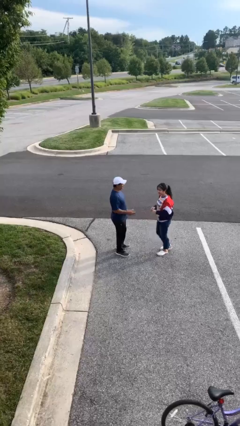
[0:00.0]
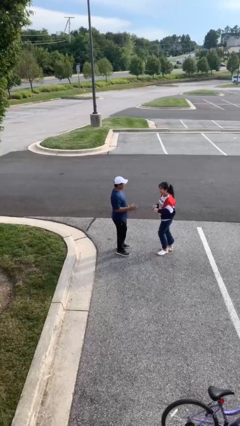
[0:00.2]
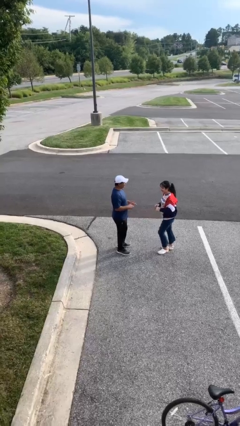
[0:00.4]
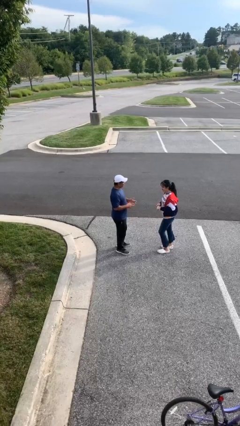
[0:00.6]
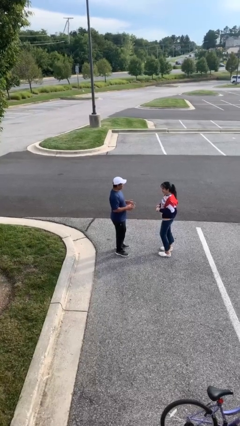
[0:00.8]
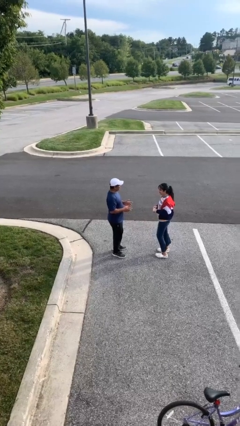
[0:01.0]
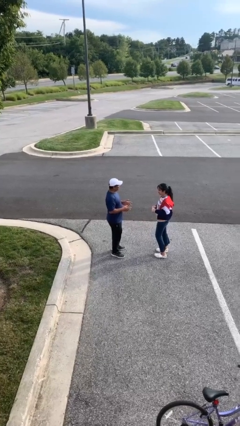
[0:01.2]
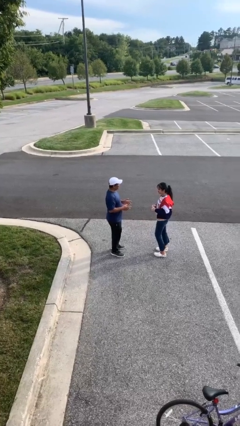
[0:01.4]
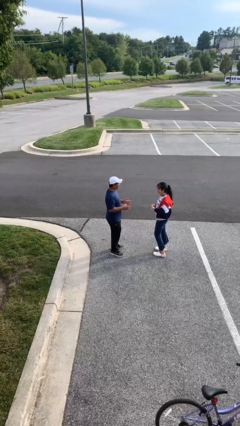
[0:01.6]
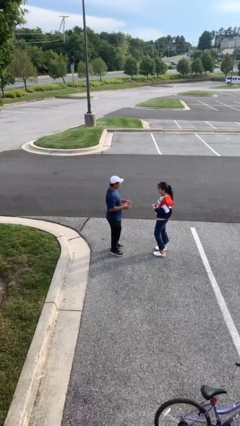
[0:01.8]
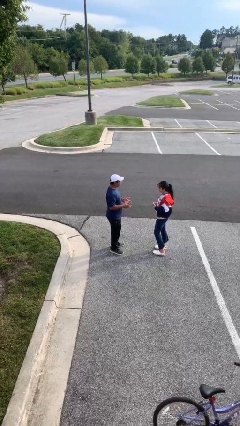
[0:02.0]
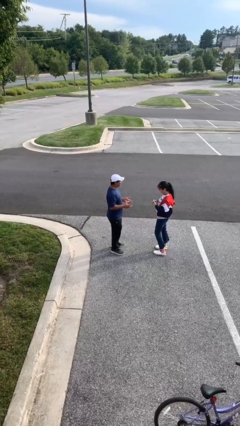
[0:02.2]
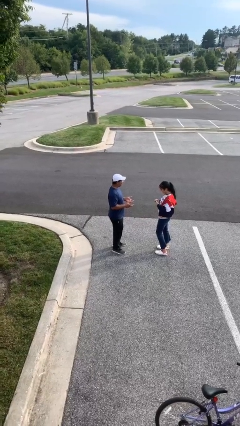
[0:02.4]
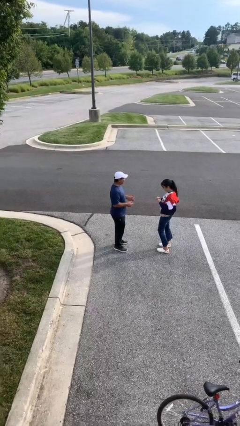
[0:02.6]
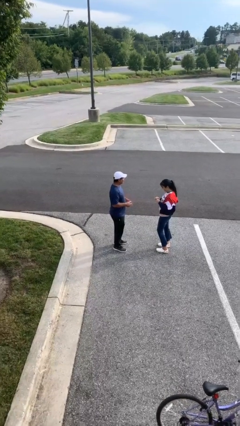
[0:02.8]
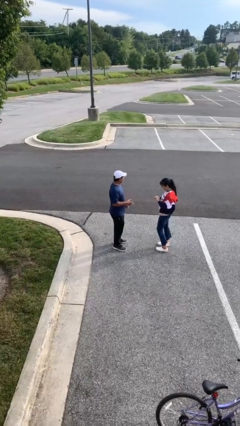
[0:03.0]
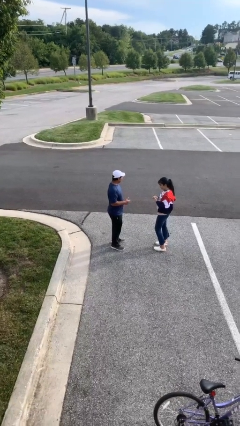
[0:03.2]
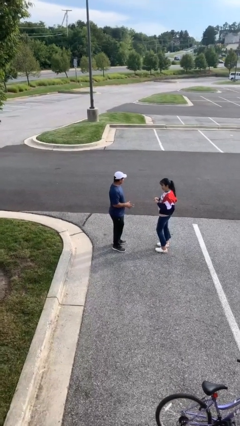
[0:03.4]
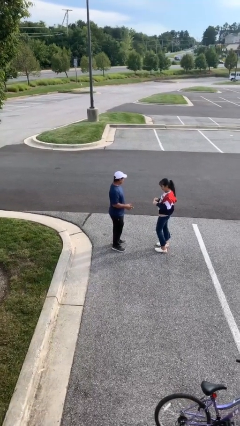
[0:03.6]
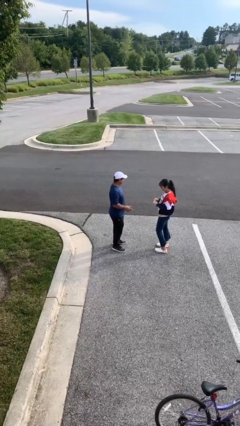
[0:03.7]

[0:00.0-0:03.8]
person talks to person

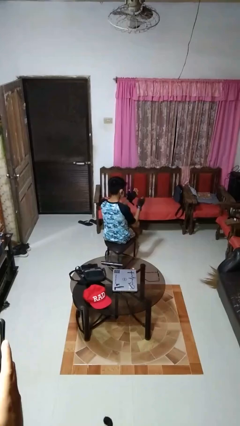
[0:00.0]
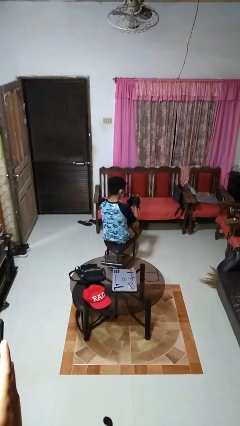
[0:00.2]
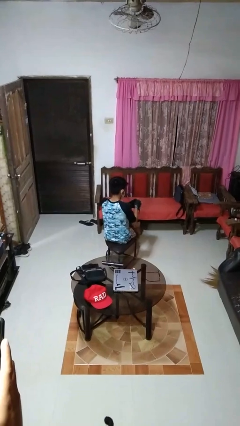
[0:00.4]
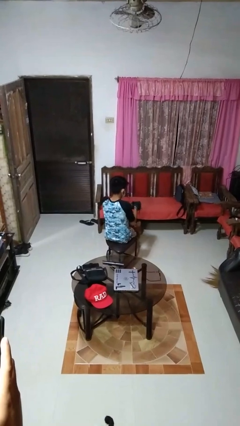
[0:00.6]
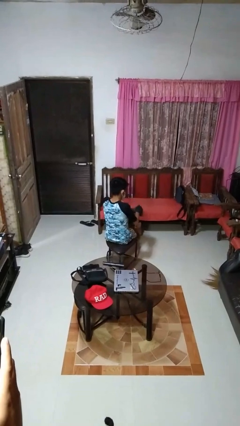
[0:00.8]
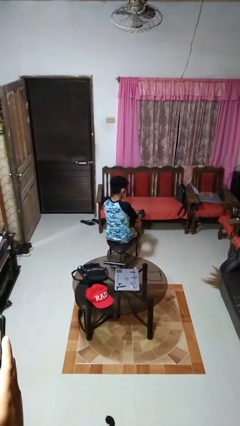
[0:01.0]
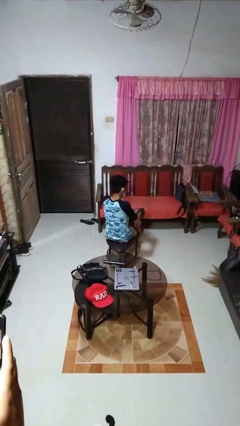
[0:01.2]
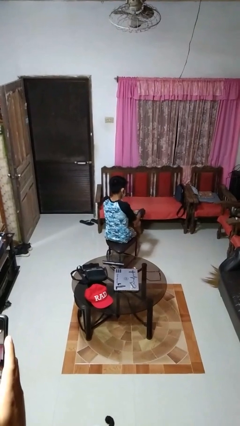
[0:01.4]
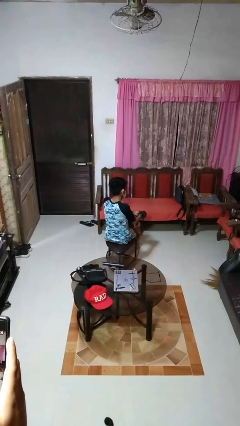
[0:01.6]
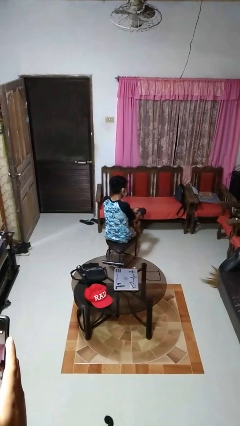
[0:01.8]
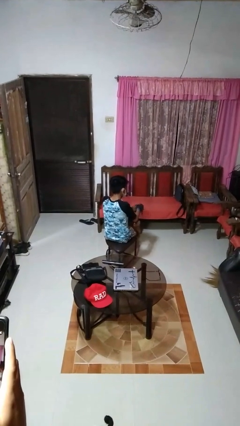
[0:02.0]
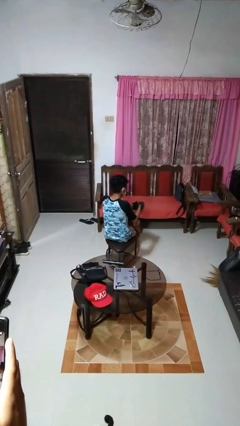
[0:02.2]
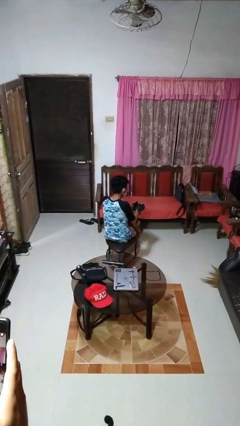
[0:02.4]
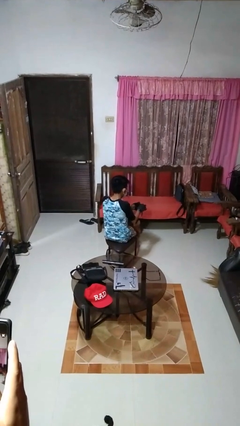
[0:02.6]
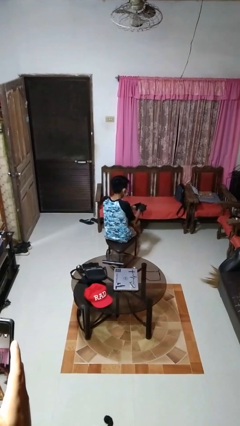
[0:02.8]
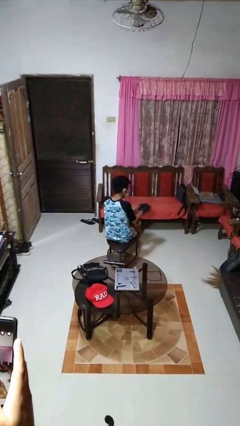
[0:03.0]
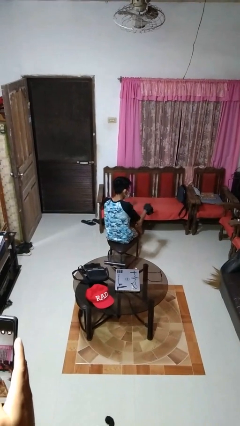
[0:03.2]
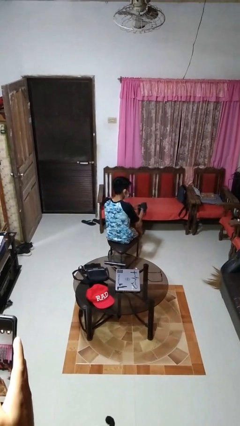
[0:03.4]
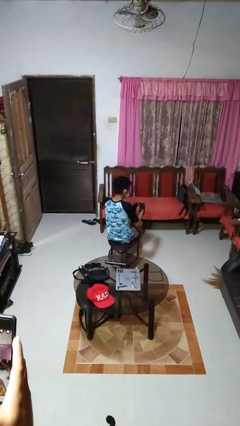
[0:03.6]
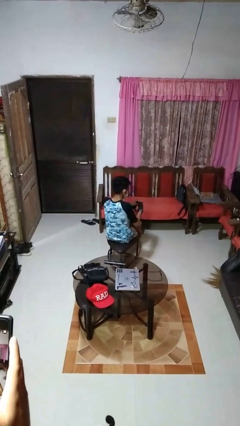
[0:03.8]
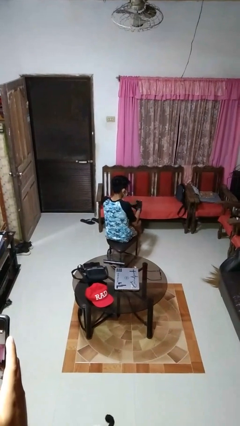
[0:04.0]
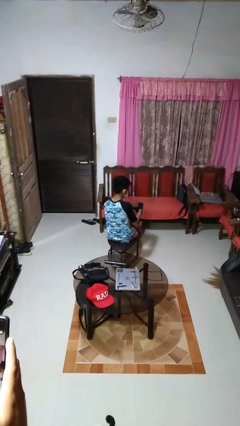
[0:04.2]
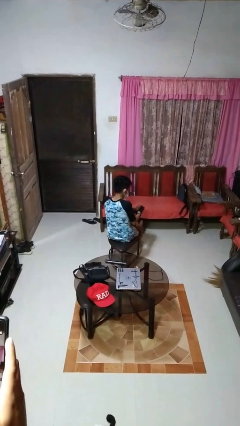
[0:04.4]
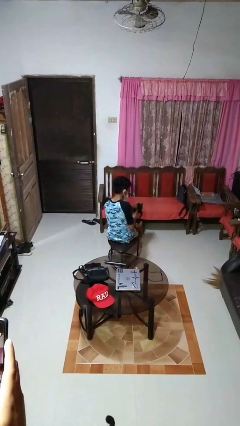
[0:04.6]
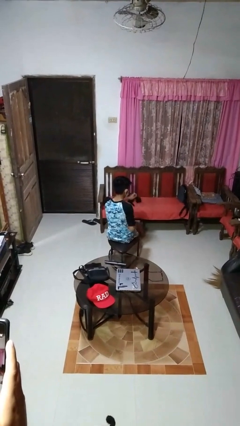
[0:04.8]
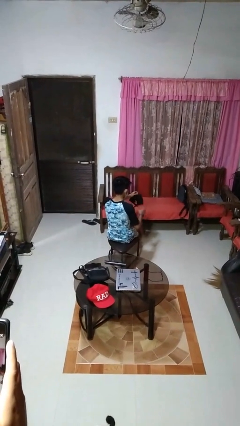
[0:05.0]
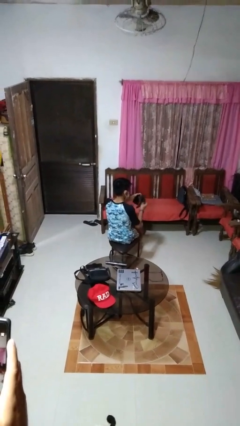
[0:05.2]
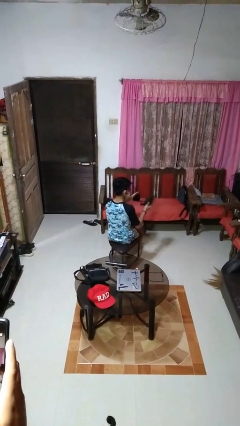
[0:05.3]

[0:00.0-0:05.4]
person takes off gloves

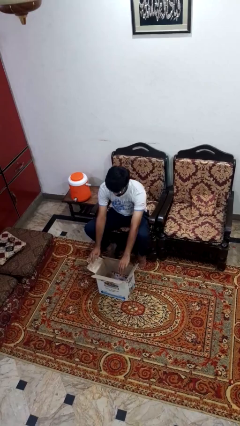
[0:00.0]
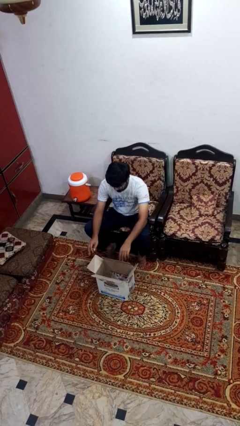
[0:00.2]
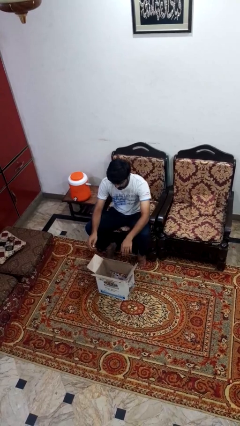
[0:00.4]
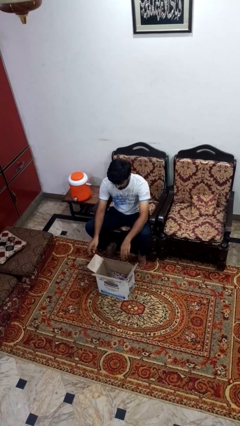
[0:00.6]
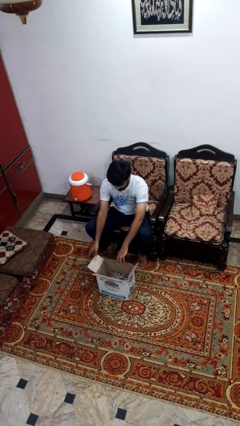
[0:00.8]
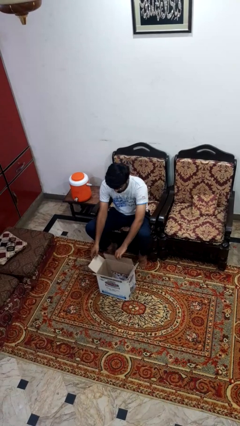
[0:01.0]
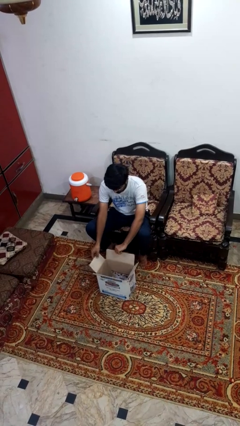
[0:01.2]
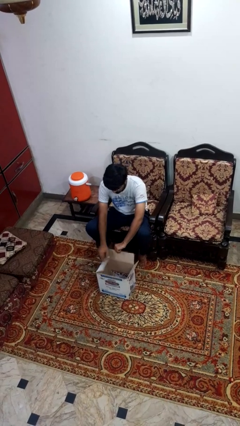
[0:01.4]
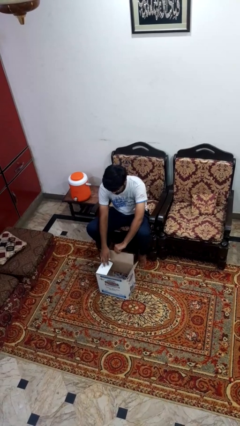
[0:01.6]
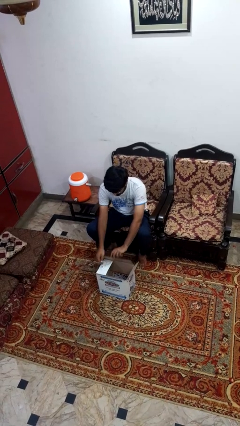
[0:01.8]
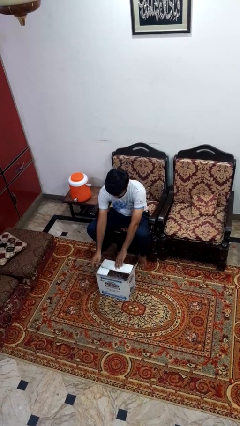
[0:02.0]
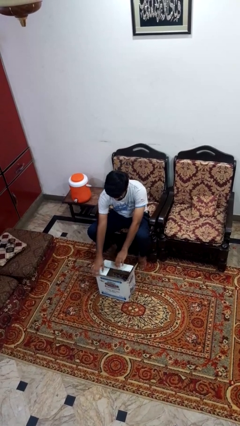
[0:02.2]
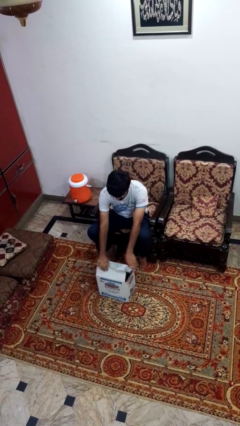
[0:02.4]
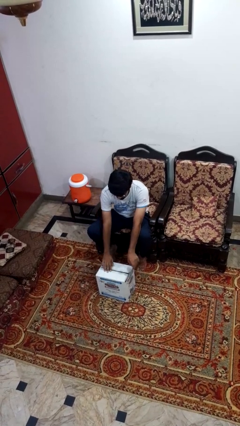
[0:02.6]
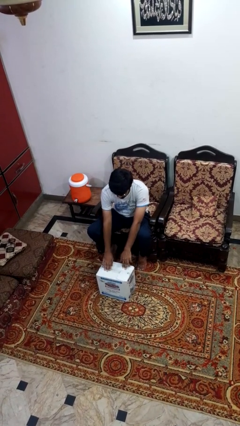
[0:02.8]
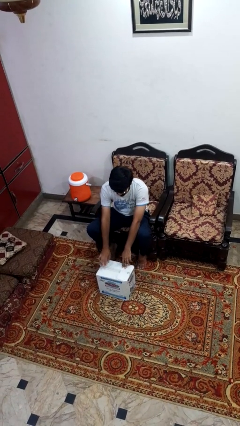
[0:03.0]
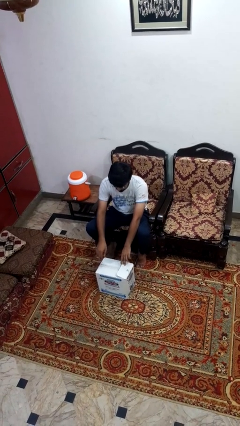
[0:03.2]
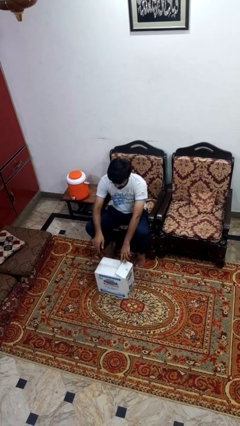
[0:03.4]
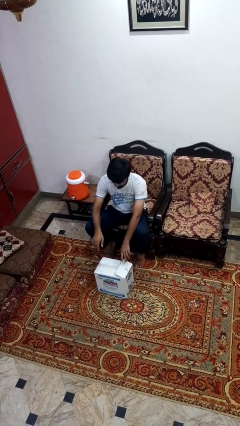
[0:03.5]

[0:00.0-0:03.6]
person closes box

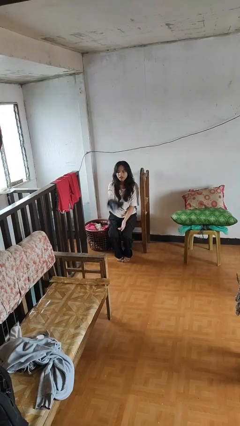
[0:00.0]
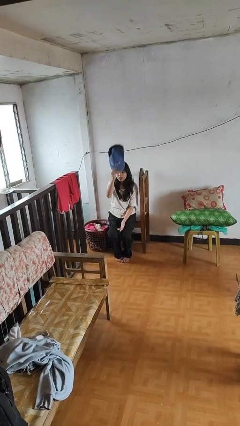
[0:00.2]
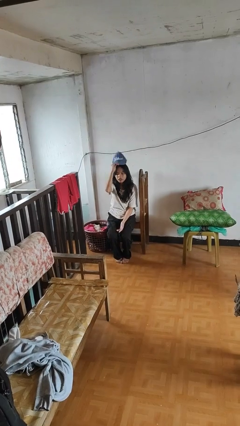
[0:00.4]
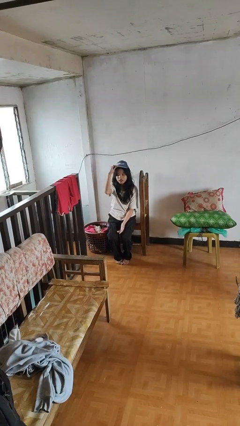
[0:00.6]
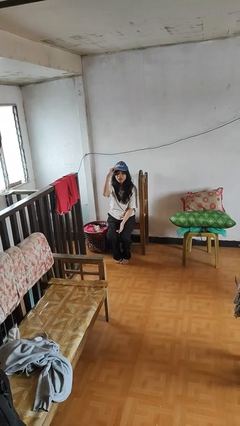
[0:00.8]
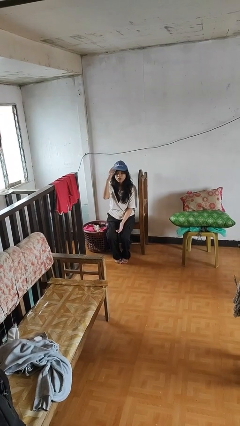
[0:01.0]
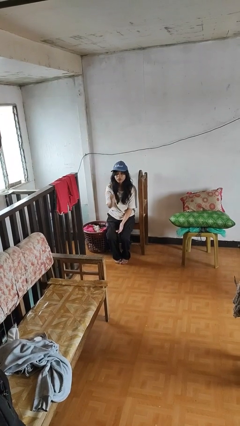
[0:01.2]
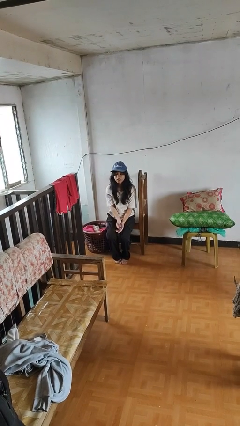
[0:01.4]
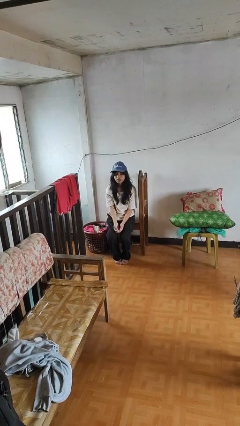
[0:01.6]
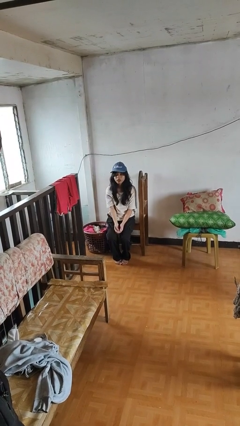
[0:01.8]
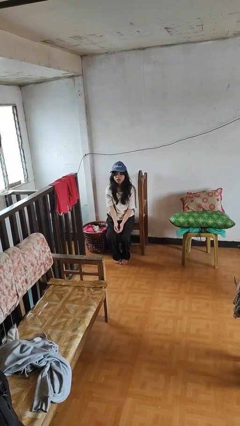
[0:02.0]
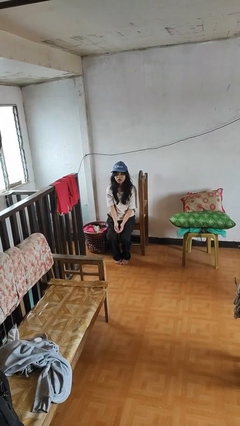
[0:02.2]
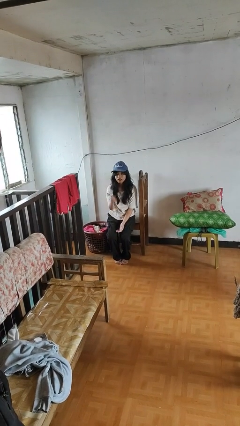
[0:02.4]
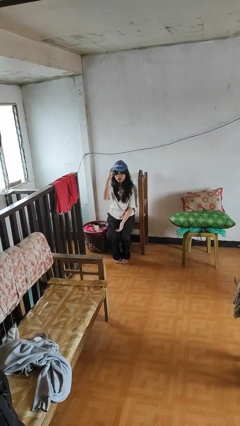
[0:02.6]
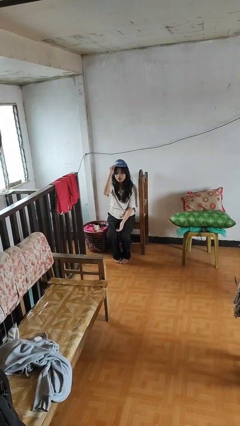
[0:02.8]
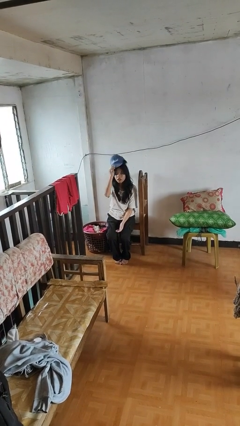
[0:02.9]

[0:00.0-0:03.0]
person puts on hat

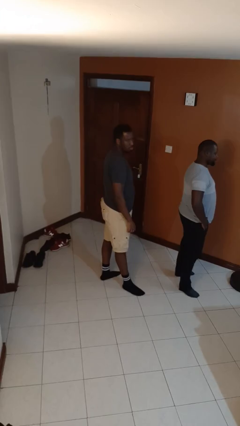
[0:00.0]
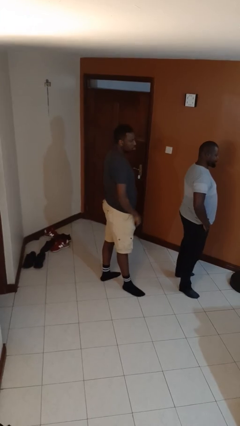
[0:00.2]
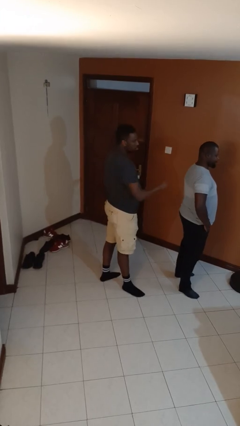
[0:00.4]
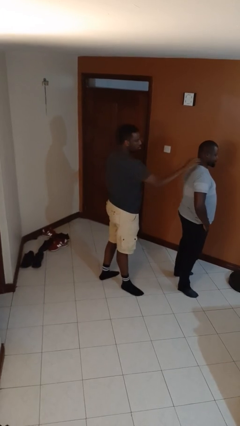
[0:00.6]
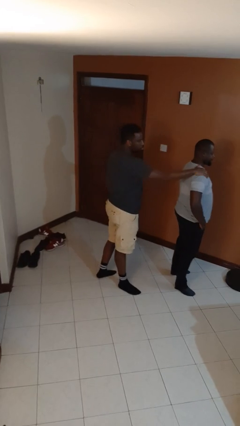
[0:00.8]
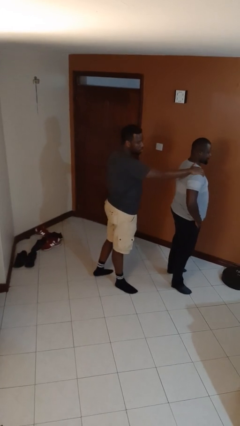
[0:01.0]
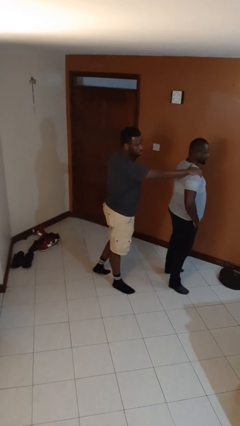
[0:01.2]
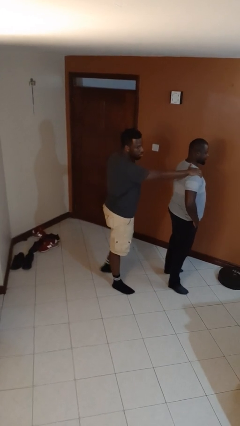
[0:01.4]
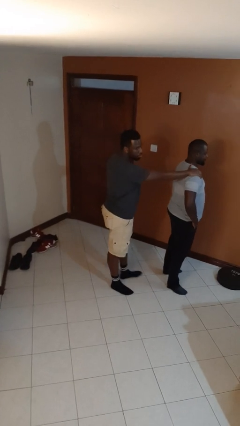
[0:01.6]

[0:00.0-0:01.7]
person grabs person by shoulder

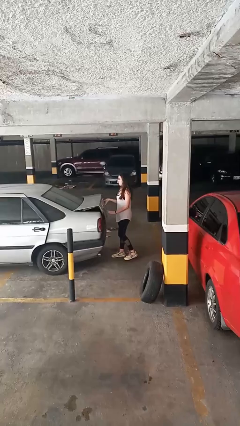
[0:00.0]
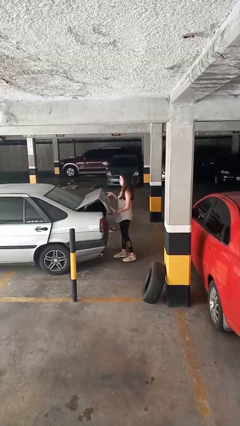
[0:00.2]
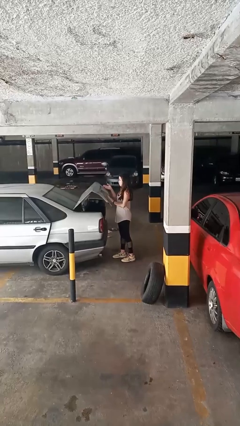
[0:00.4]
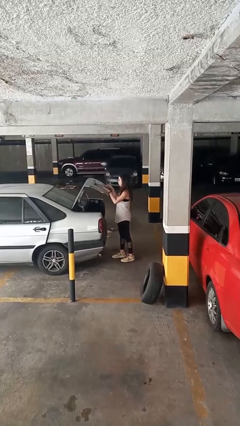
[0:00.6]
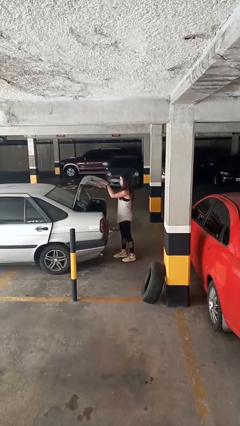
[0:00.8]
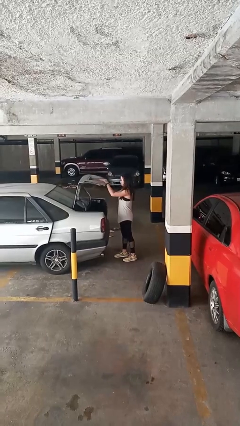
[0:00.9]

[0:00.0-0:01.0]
person opens car trunk
